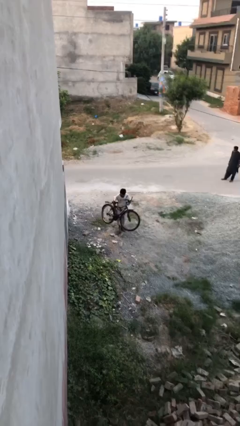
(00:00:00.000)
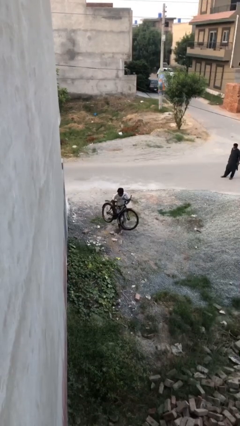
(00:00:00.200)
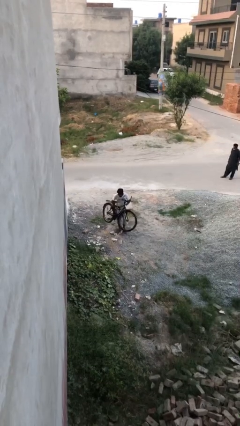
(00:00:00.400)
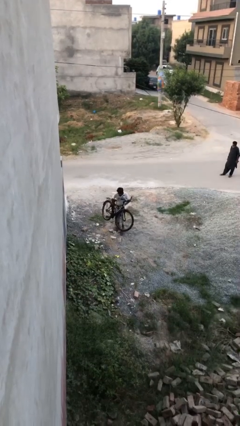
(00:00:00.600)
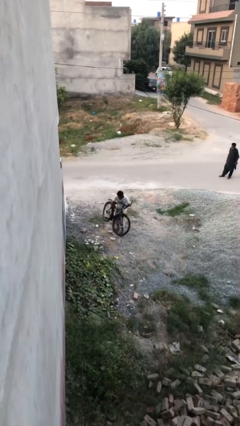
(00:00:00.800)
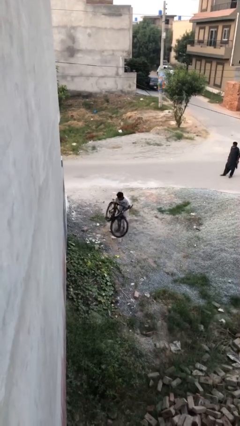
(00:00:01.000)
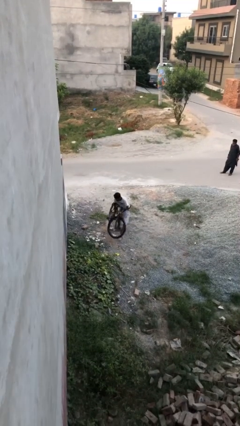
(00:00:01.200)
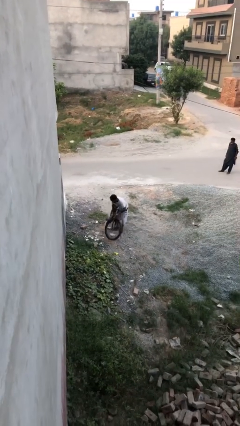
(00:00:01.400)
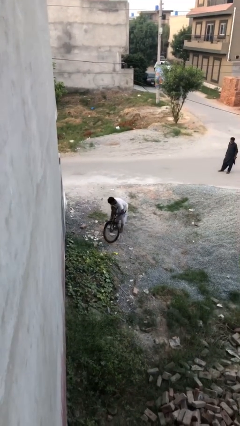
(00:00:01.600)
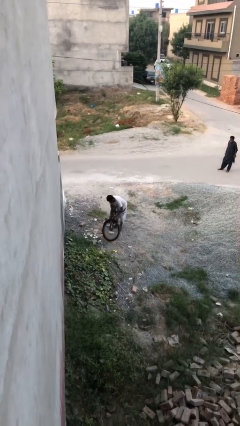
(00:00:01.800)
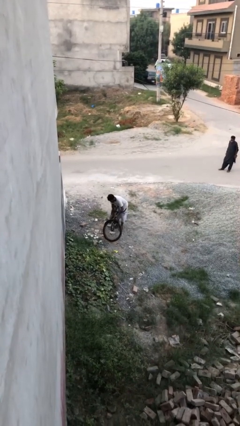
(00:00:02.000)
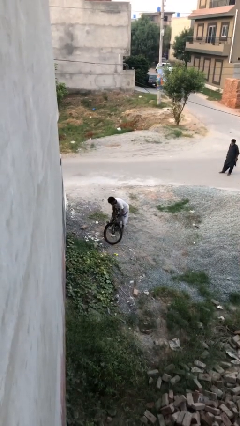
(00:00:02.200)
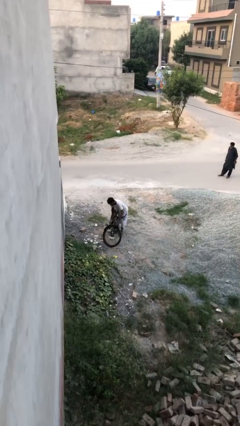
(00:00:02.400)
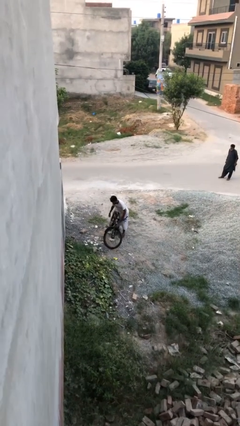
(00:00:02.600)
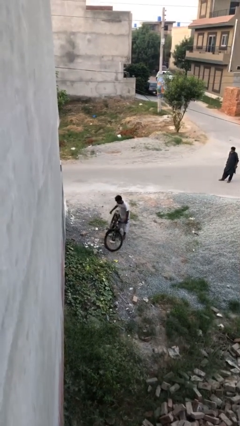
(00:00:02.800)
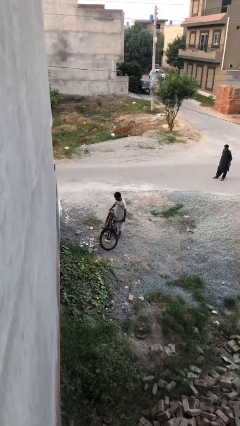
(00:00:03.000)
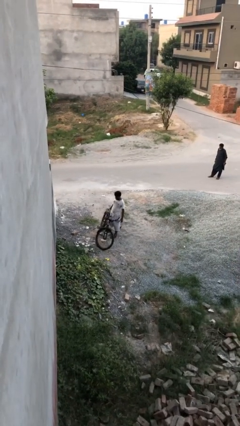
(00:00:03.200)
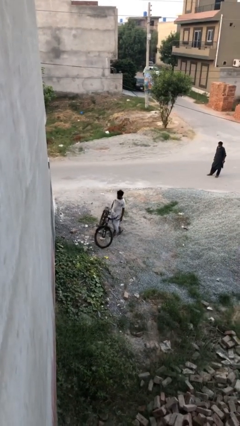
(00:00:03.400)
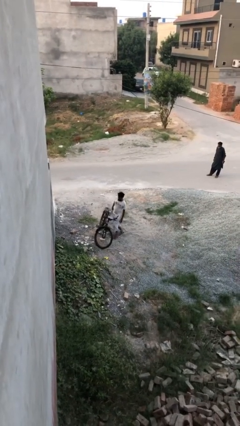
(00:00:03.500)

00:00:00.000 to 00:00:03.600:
person puts down object on floor

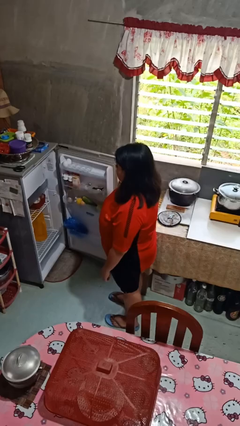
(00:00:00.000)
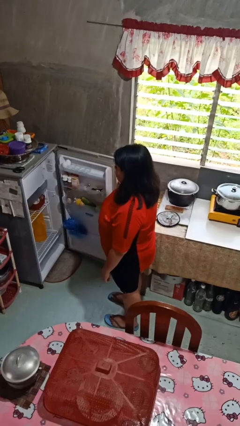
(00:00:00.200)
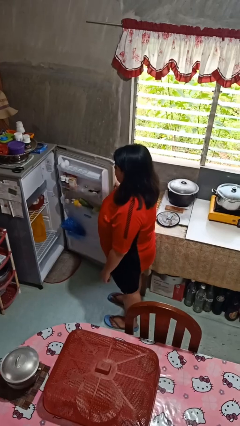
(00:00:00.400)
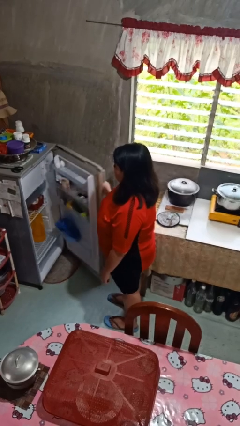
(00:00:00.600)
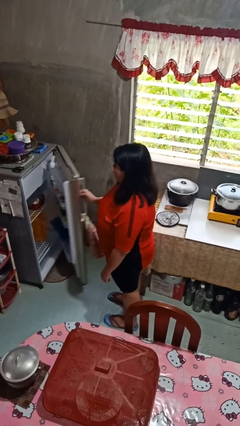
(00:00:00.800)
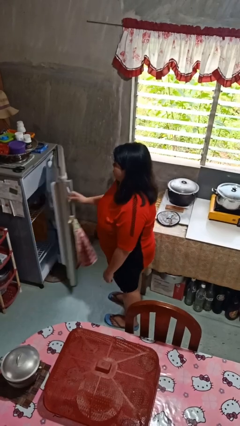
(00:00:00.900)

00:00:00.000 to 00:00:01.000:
person closes refrigerator

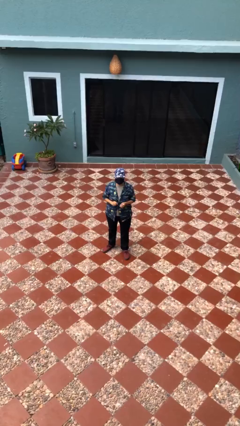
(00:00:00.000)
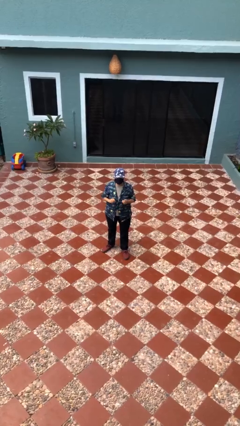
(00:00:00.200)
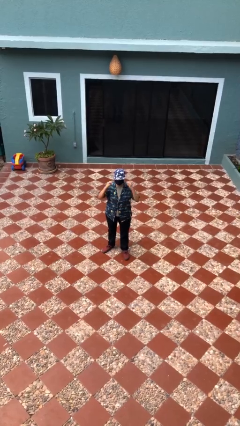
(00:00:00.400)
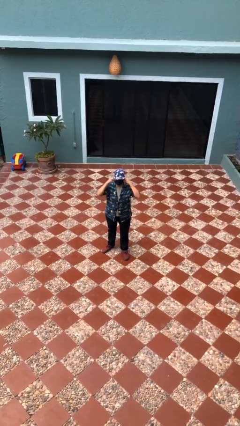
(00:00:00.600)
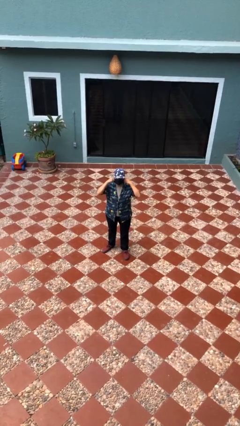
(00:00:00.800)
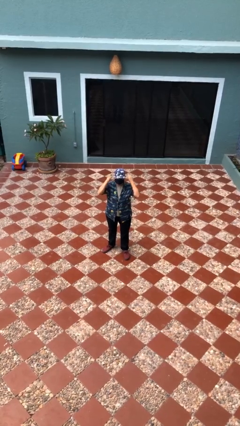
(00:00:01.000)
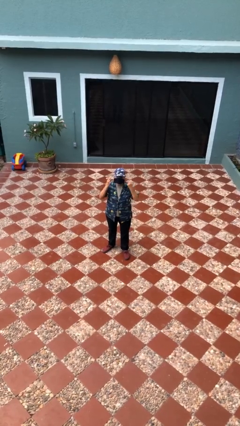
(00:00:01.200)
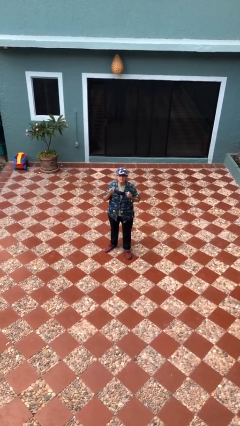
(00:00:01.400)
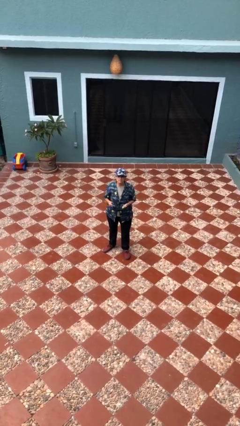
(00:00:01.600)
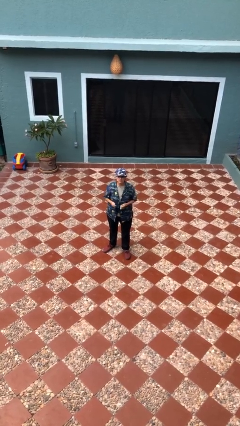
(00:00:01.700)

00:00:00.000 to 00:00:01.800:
person takes off facemask

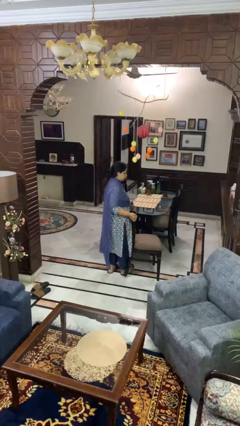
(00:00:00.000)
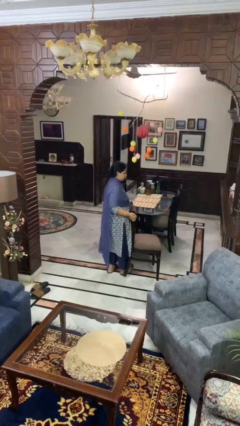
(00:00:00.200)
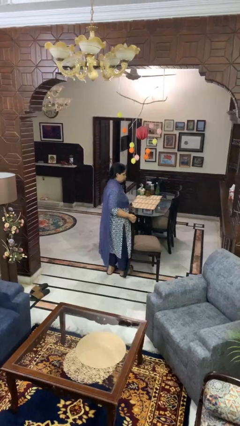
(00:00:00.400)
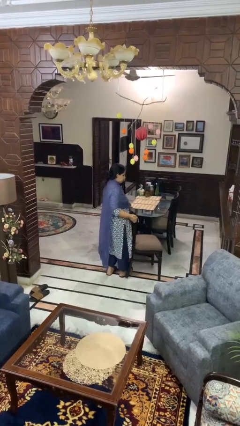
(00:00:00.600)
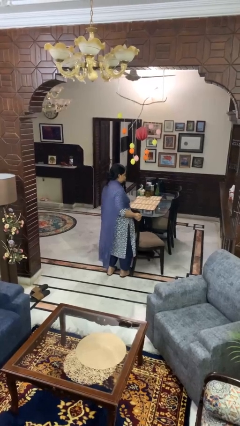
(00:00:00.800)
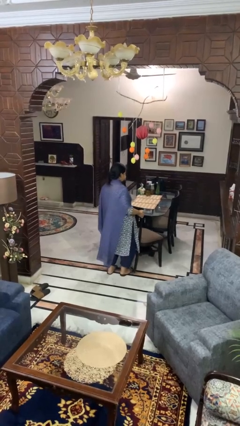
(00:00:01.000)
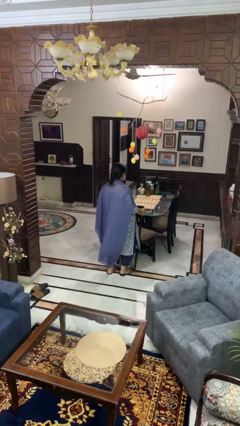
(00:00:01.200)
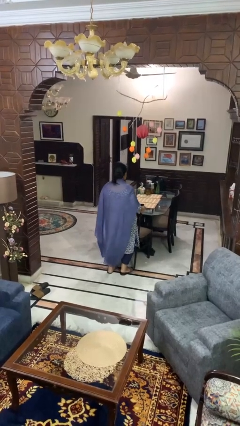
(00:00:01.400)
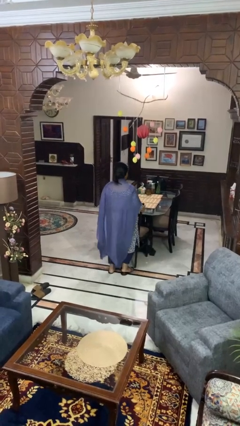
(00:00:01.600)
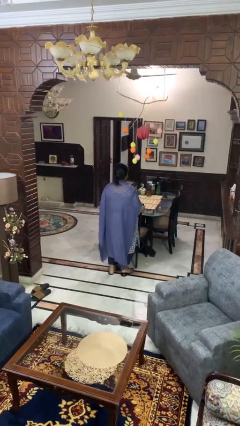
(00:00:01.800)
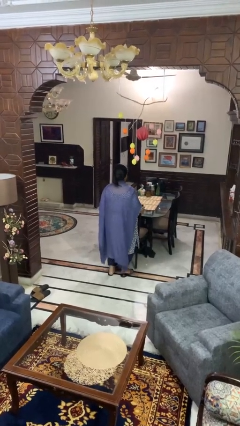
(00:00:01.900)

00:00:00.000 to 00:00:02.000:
person pushes in chair

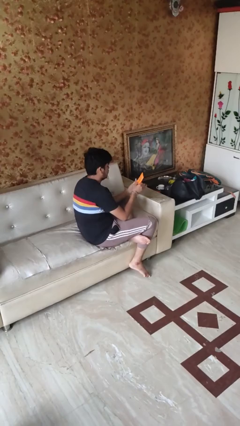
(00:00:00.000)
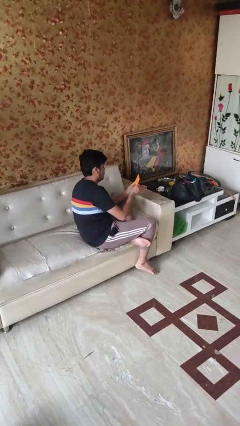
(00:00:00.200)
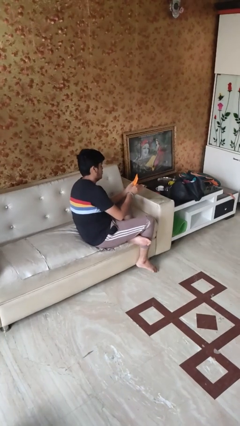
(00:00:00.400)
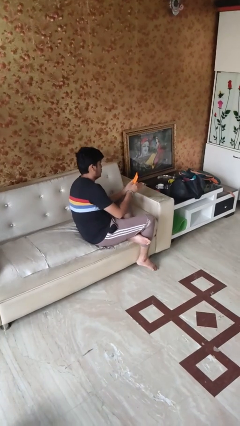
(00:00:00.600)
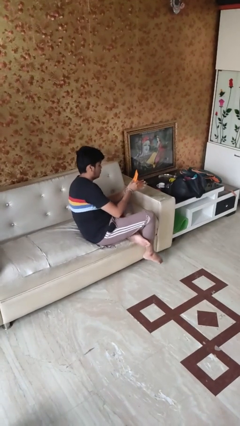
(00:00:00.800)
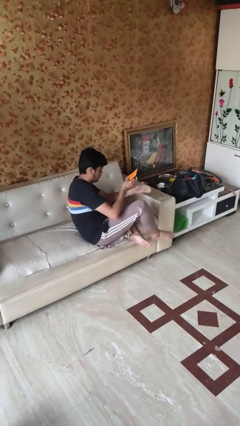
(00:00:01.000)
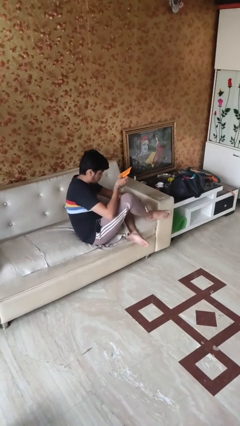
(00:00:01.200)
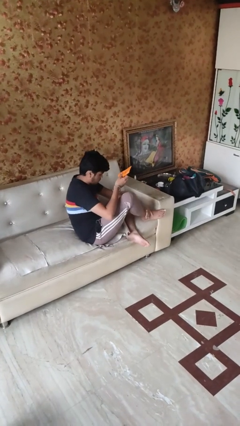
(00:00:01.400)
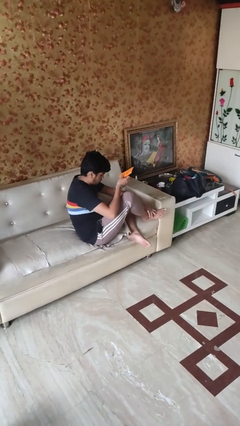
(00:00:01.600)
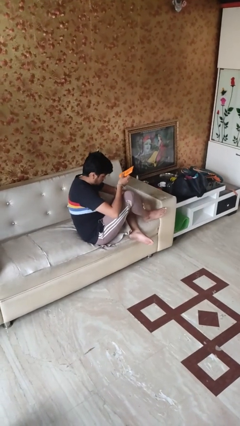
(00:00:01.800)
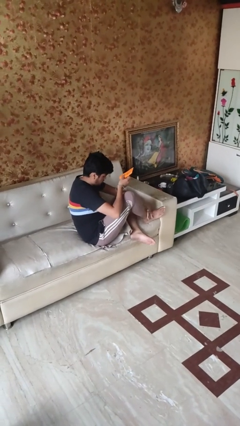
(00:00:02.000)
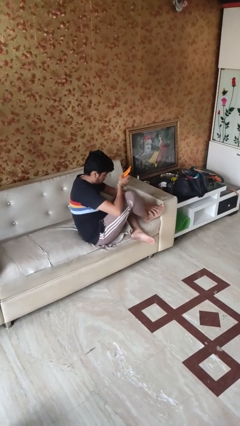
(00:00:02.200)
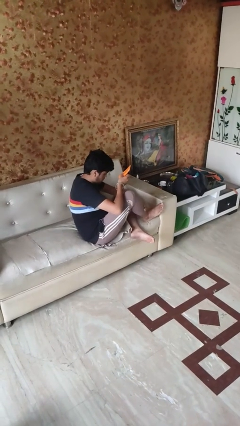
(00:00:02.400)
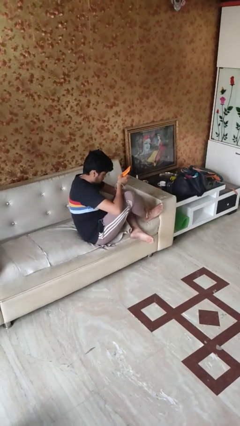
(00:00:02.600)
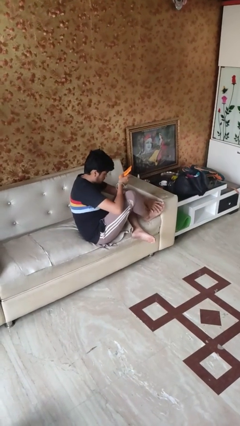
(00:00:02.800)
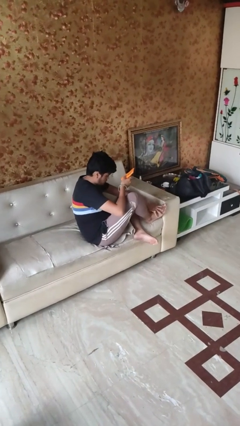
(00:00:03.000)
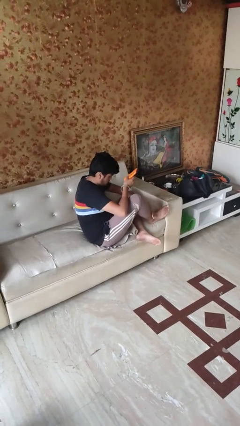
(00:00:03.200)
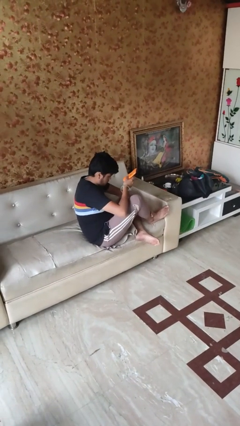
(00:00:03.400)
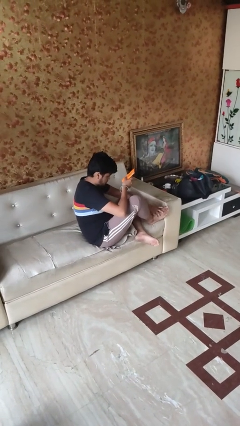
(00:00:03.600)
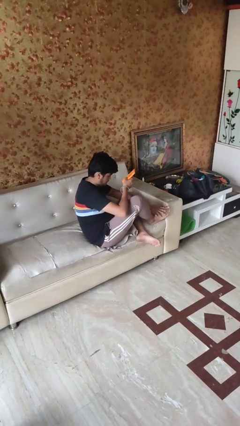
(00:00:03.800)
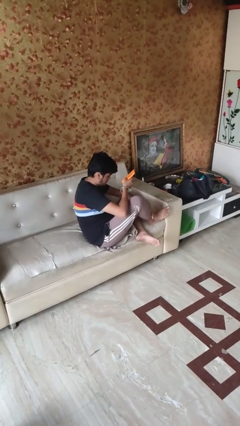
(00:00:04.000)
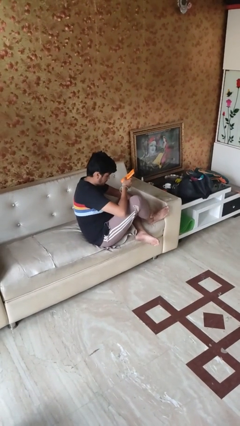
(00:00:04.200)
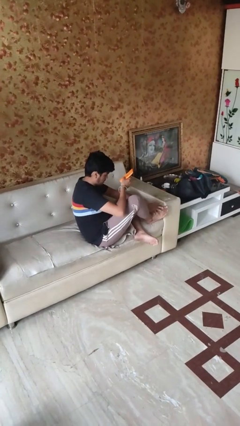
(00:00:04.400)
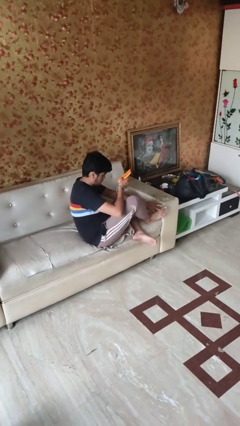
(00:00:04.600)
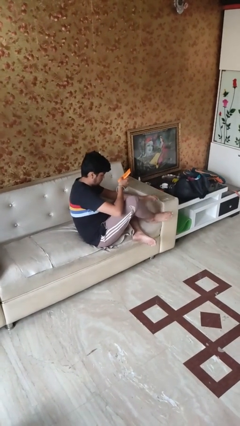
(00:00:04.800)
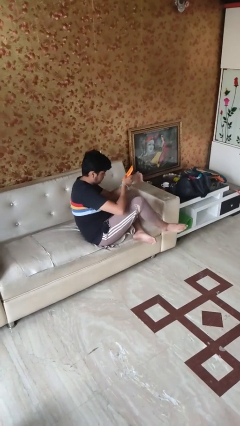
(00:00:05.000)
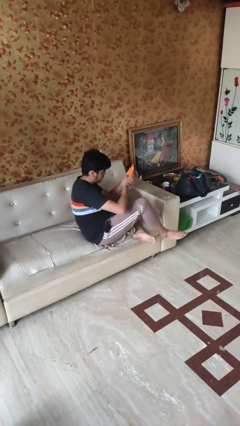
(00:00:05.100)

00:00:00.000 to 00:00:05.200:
person applies sunscreen

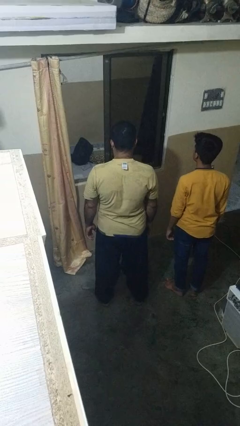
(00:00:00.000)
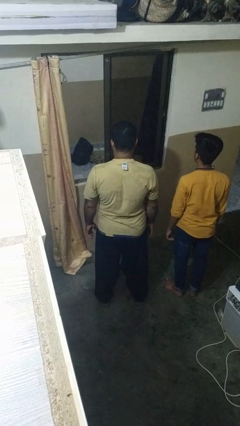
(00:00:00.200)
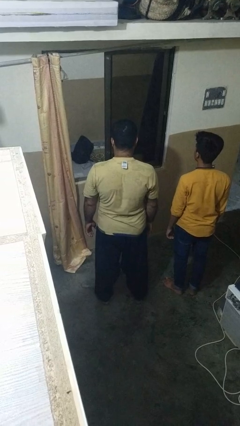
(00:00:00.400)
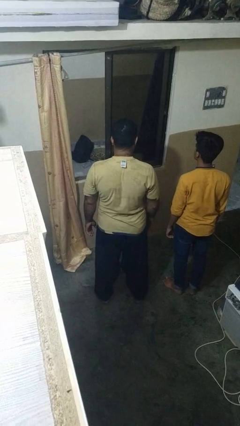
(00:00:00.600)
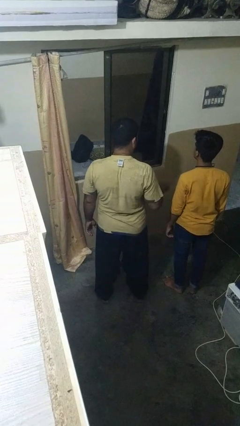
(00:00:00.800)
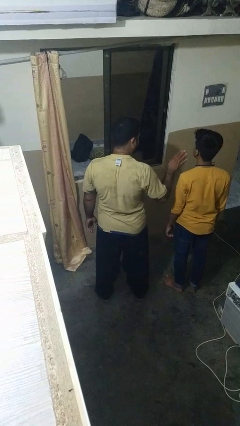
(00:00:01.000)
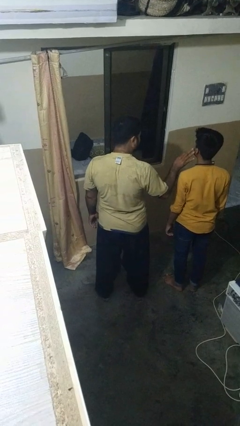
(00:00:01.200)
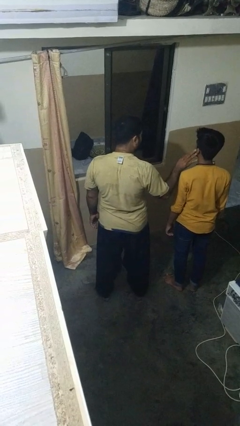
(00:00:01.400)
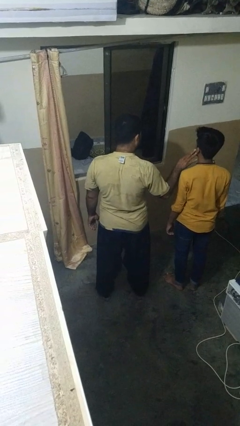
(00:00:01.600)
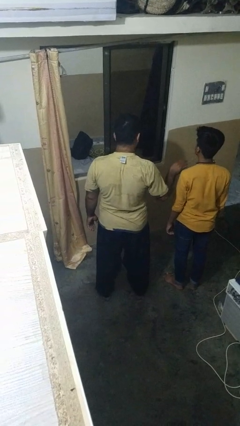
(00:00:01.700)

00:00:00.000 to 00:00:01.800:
person touches face of person

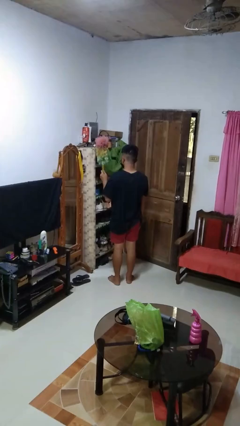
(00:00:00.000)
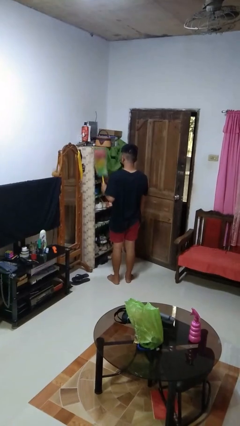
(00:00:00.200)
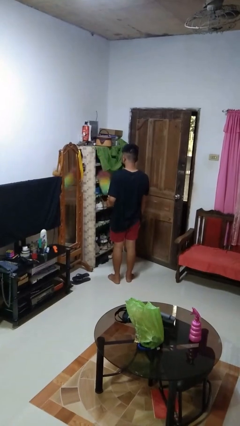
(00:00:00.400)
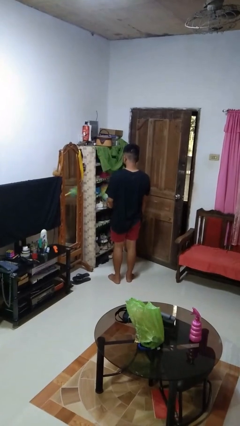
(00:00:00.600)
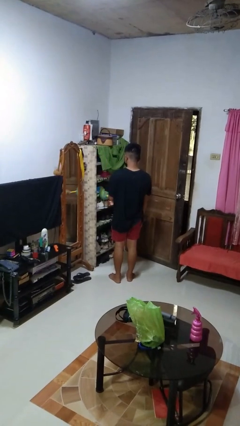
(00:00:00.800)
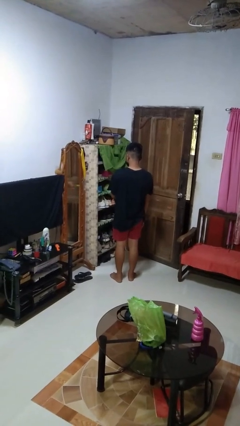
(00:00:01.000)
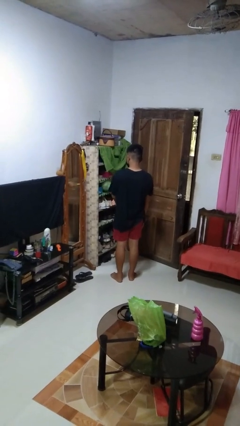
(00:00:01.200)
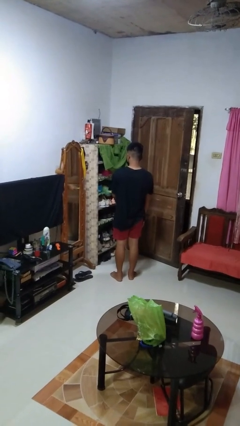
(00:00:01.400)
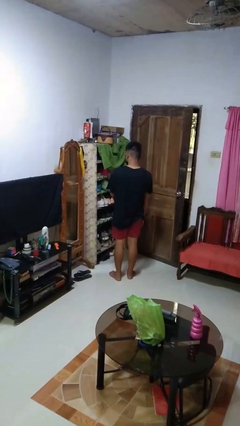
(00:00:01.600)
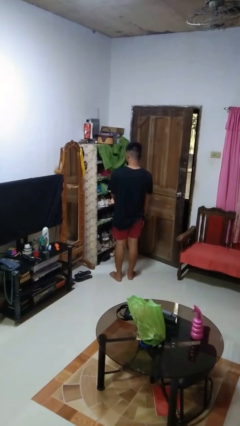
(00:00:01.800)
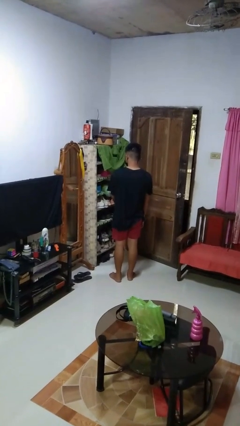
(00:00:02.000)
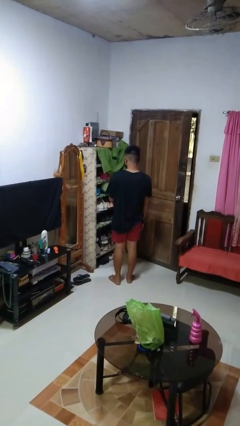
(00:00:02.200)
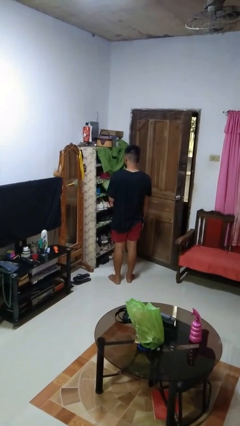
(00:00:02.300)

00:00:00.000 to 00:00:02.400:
person dusts furniture
